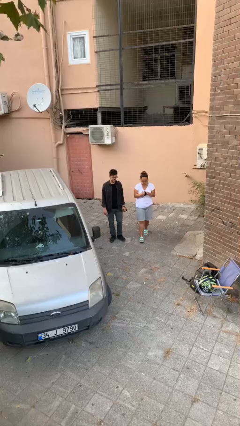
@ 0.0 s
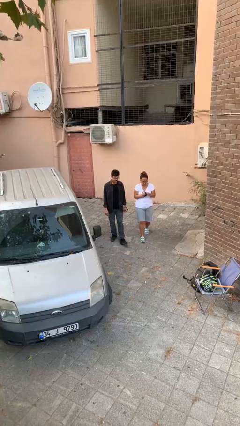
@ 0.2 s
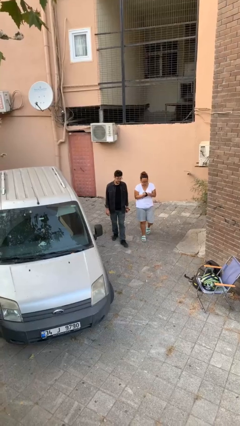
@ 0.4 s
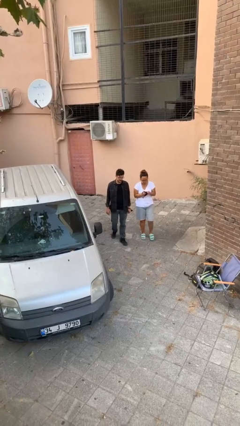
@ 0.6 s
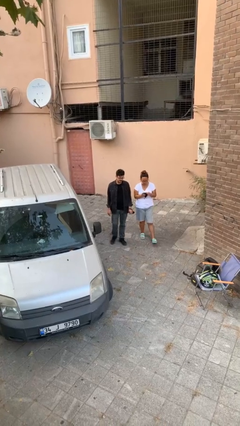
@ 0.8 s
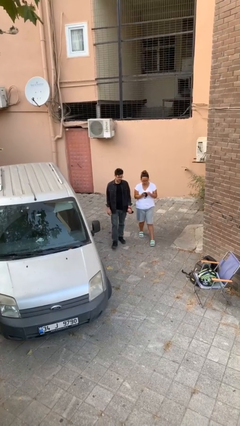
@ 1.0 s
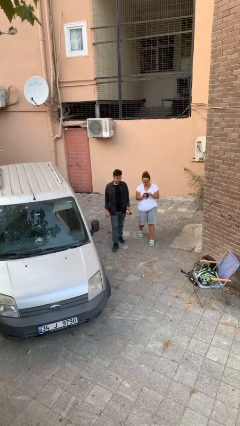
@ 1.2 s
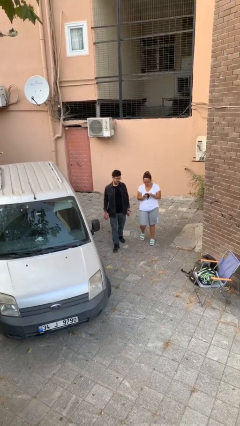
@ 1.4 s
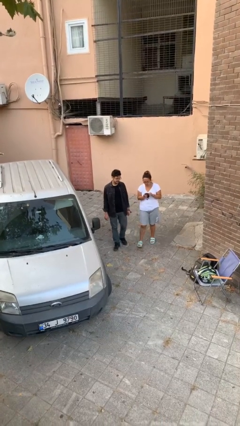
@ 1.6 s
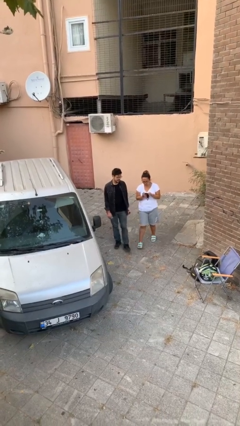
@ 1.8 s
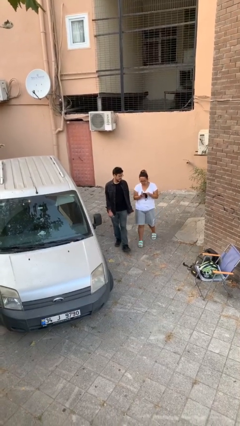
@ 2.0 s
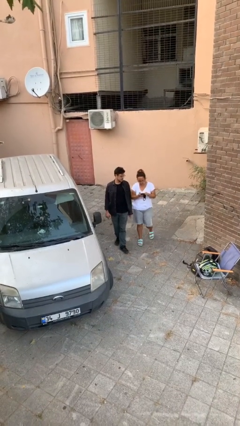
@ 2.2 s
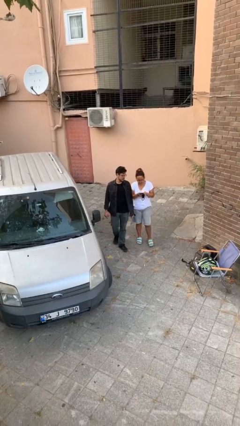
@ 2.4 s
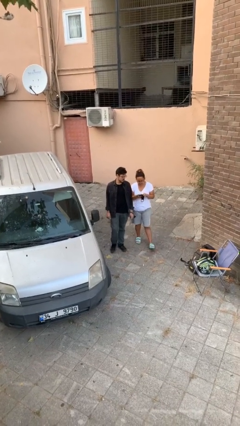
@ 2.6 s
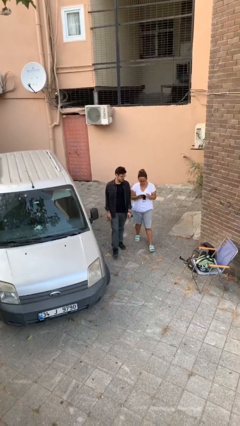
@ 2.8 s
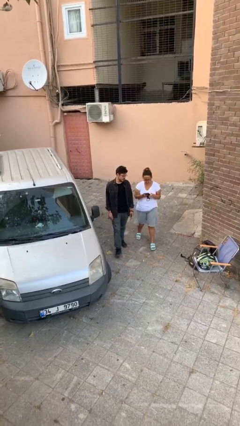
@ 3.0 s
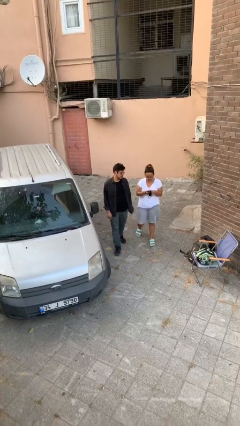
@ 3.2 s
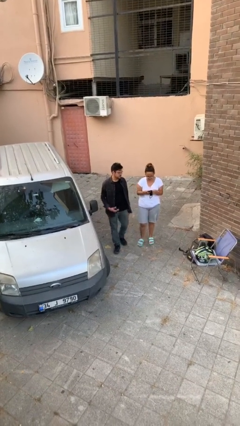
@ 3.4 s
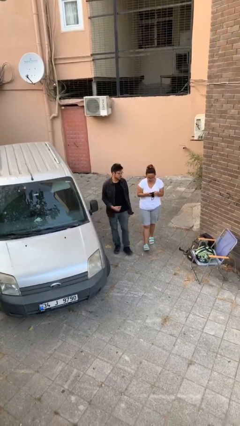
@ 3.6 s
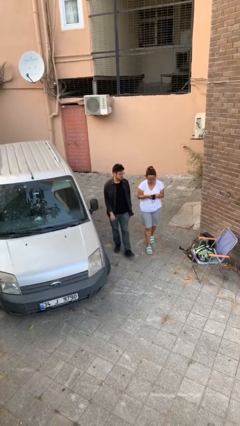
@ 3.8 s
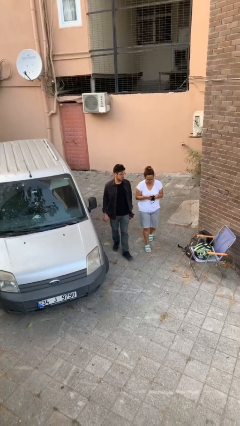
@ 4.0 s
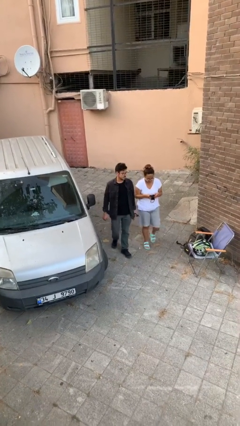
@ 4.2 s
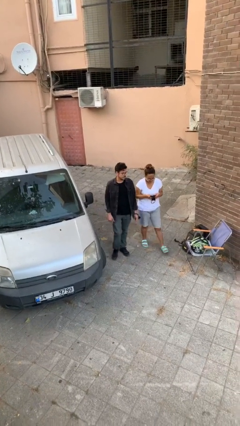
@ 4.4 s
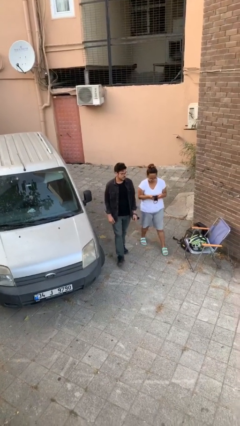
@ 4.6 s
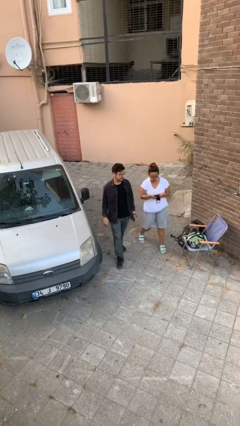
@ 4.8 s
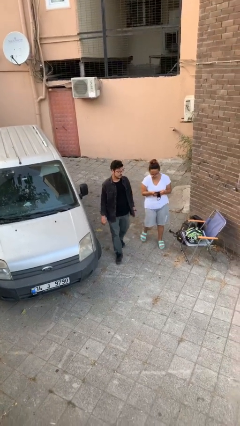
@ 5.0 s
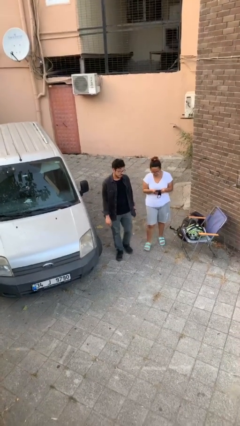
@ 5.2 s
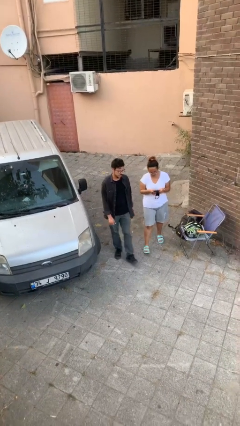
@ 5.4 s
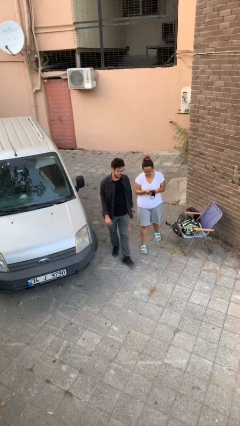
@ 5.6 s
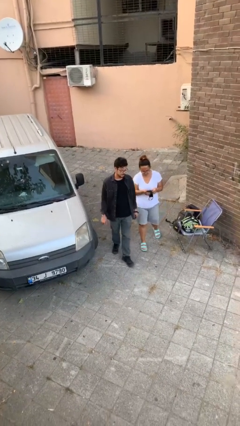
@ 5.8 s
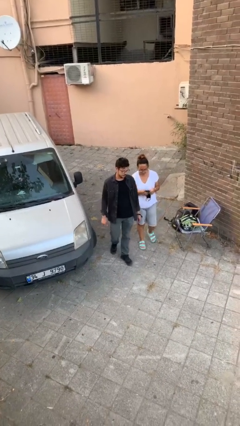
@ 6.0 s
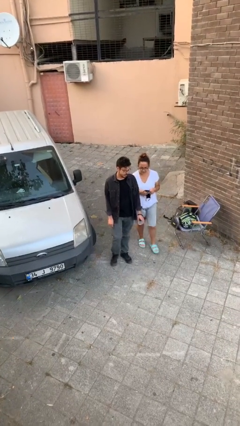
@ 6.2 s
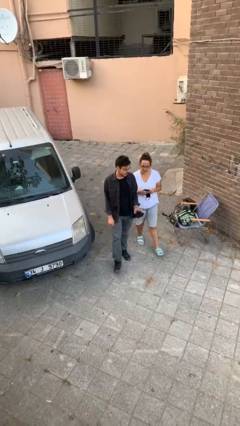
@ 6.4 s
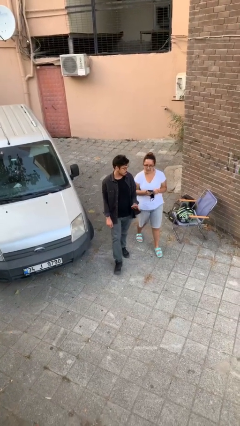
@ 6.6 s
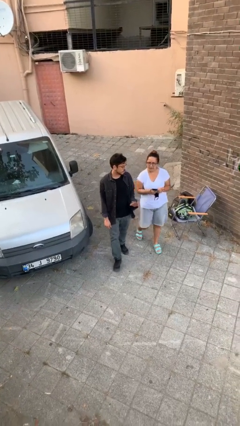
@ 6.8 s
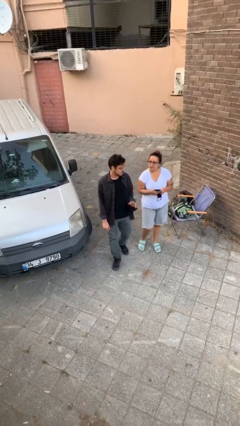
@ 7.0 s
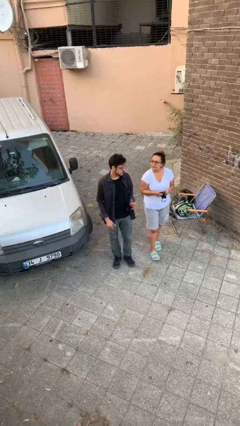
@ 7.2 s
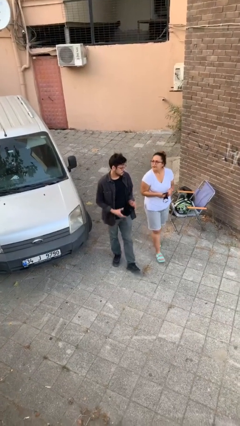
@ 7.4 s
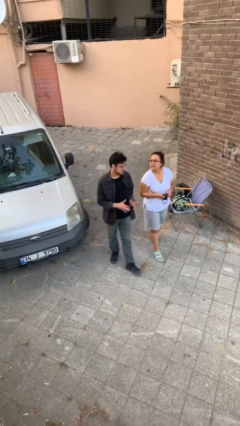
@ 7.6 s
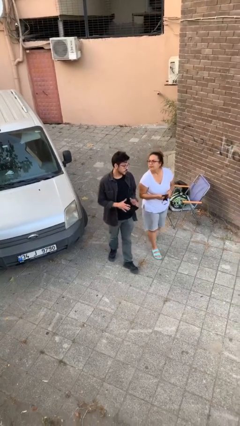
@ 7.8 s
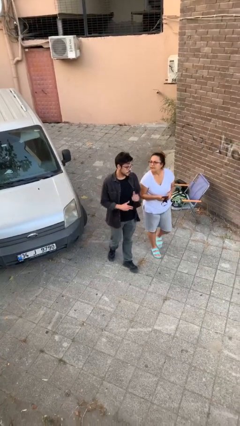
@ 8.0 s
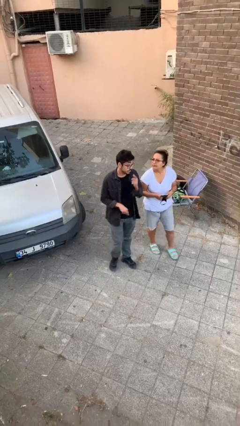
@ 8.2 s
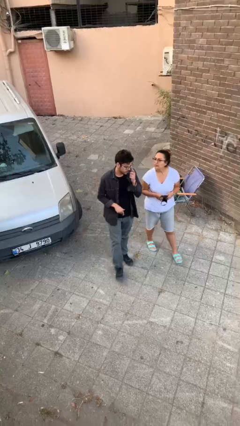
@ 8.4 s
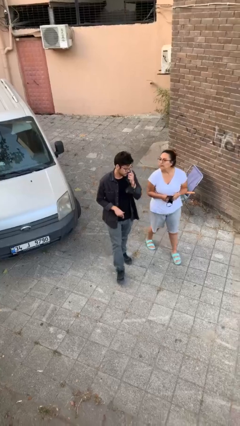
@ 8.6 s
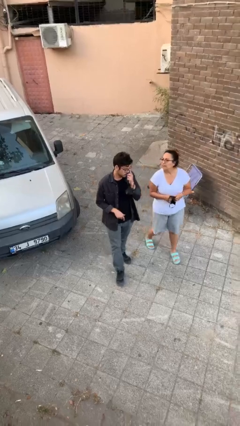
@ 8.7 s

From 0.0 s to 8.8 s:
person talks to person

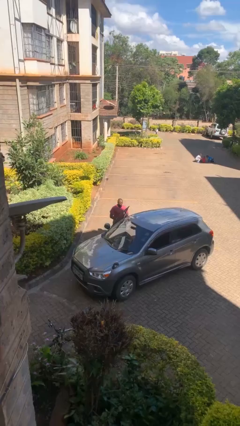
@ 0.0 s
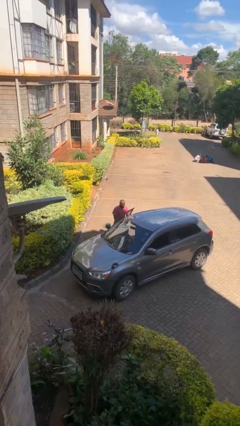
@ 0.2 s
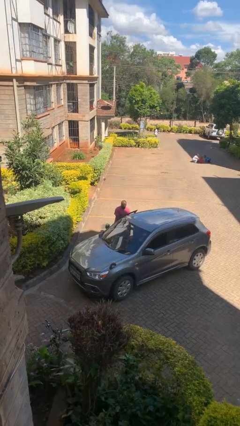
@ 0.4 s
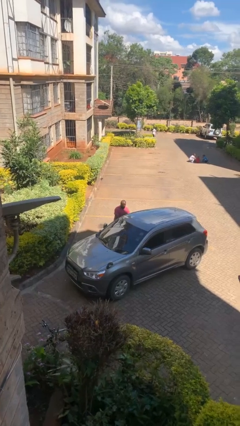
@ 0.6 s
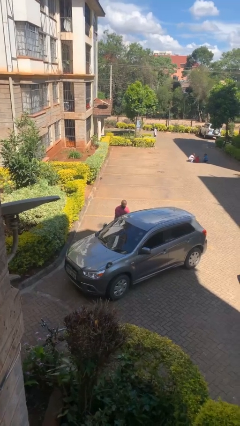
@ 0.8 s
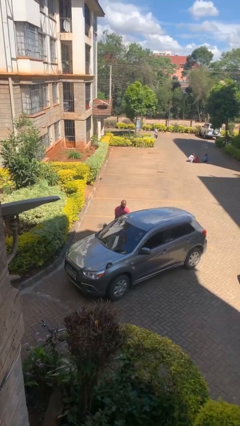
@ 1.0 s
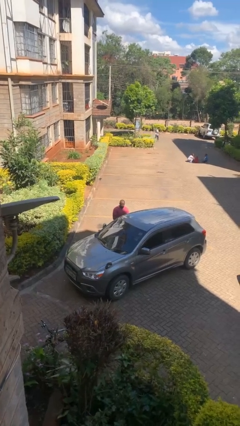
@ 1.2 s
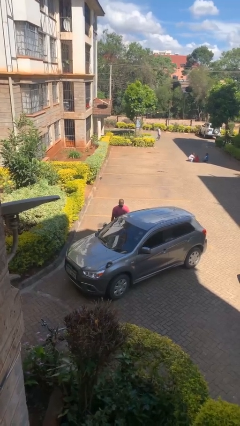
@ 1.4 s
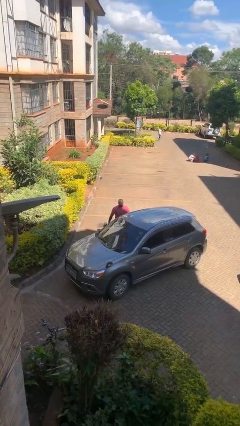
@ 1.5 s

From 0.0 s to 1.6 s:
person closes car door

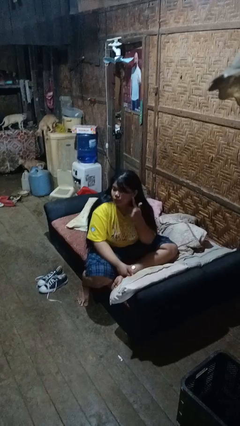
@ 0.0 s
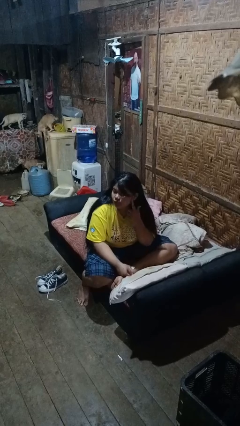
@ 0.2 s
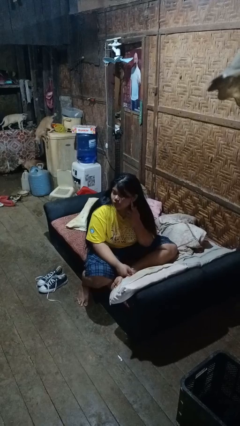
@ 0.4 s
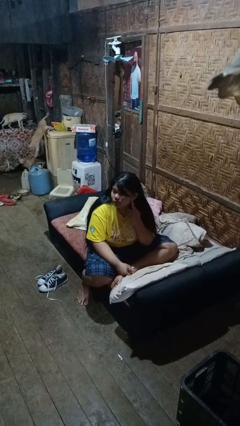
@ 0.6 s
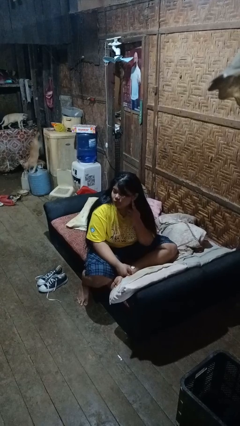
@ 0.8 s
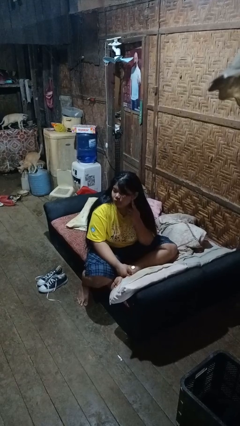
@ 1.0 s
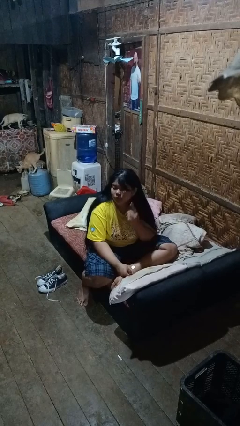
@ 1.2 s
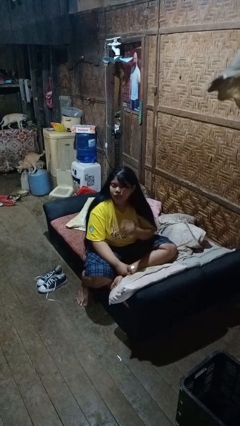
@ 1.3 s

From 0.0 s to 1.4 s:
person gestures listen closely

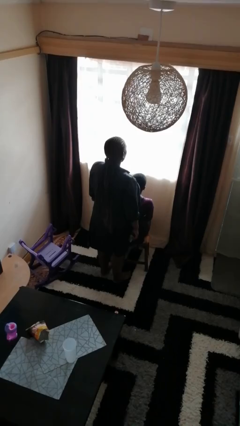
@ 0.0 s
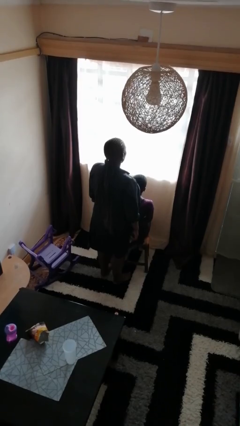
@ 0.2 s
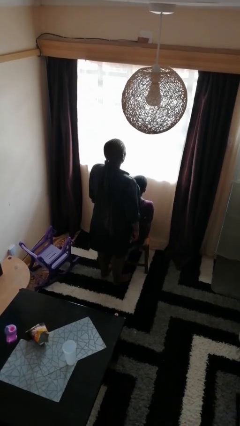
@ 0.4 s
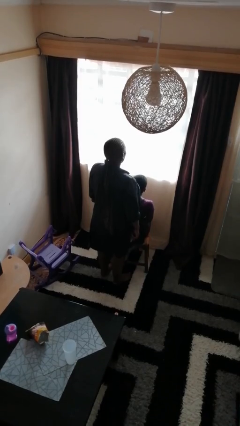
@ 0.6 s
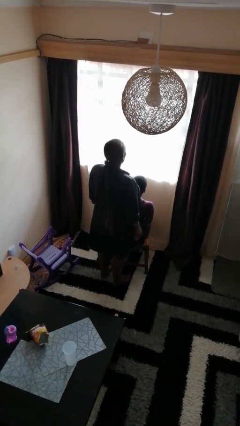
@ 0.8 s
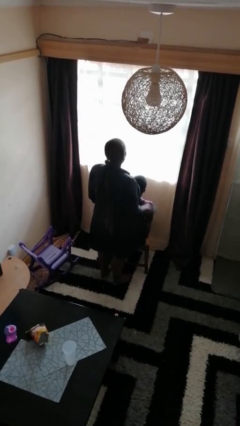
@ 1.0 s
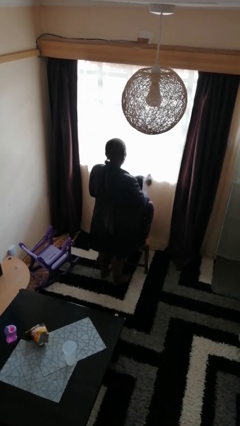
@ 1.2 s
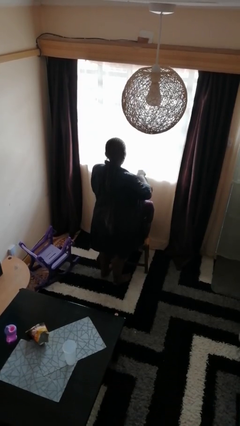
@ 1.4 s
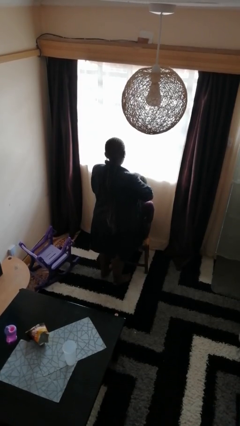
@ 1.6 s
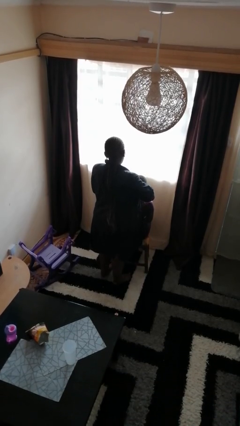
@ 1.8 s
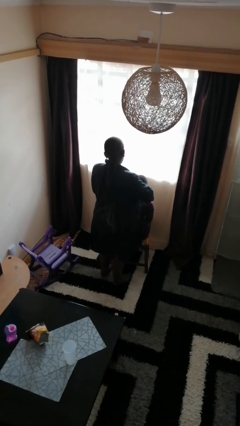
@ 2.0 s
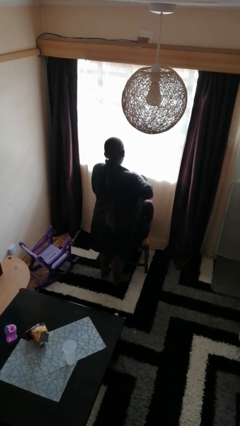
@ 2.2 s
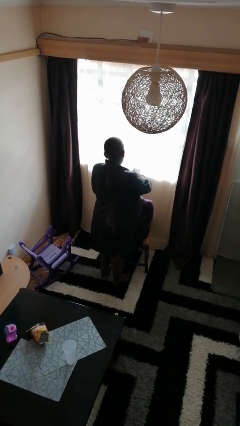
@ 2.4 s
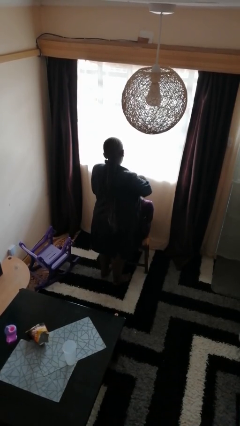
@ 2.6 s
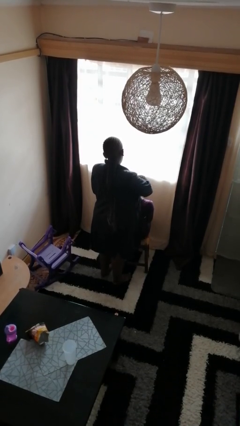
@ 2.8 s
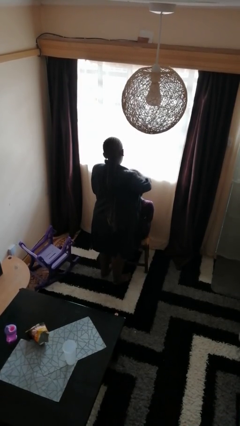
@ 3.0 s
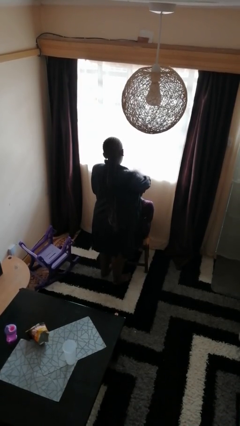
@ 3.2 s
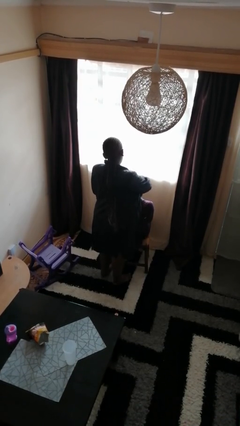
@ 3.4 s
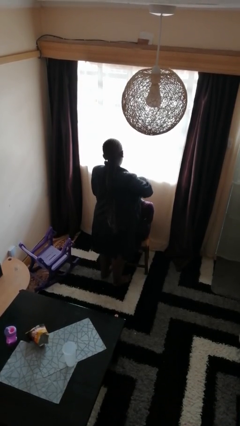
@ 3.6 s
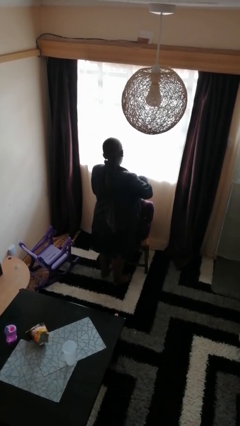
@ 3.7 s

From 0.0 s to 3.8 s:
person brushes hair of person

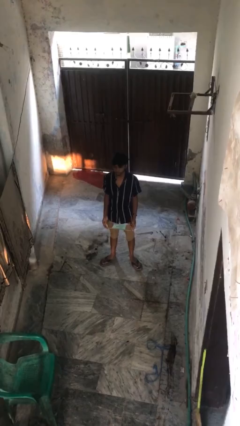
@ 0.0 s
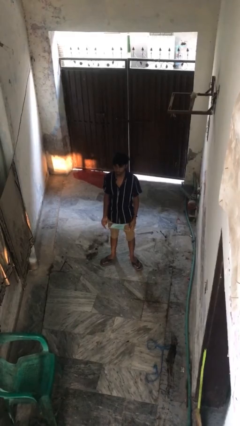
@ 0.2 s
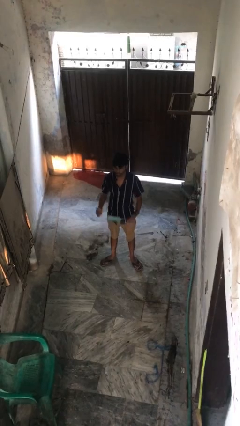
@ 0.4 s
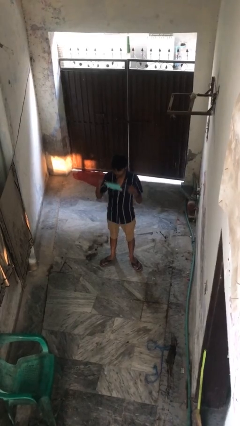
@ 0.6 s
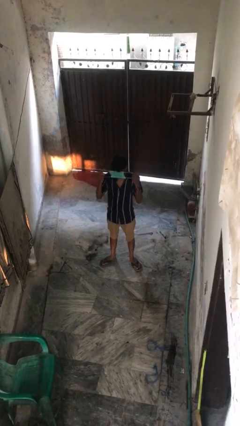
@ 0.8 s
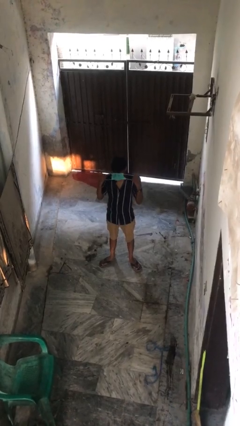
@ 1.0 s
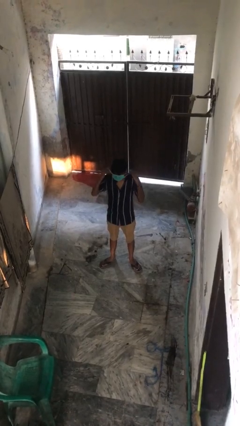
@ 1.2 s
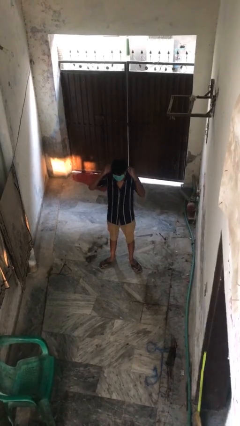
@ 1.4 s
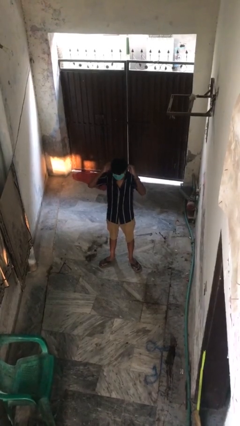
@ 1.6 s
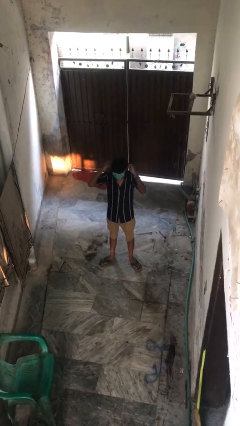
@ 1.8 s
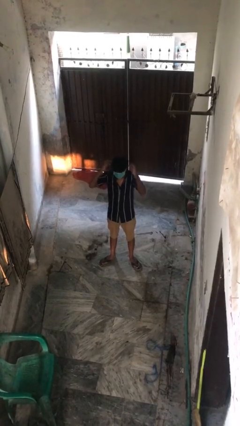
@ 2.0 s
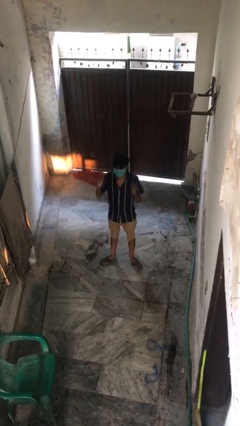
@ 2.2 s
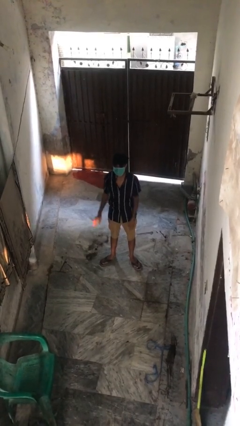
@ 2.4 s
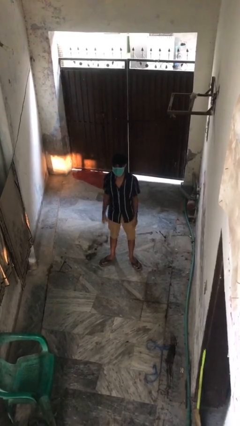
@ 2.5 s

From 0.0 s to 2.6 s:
person puts on facemask
